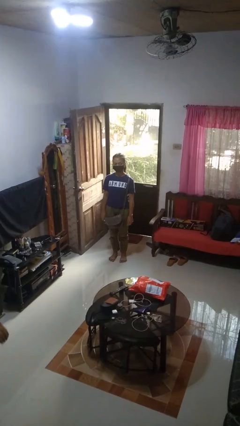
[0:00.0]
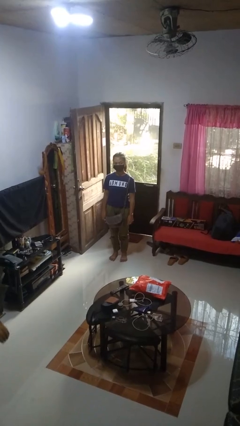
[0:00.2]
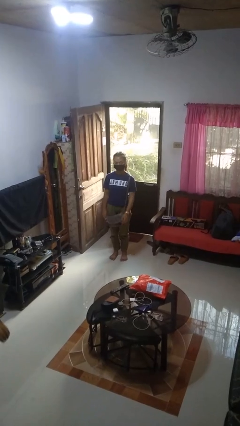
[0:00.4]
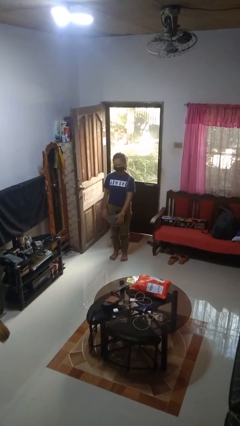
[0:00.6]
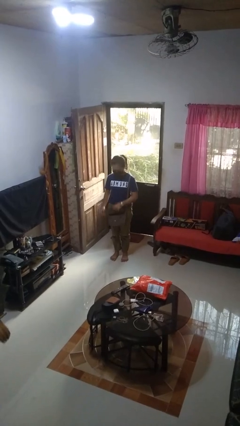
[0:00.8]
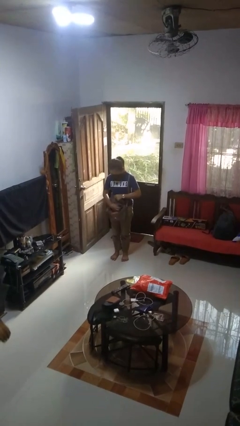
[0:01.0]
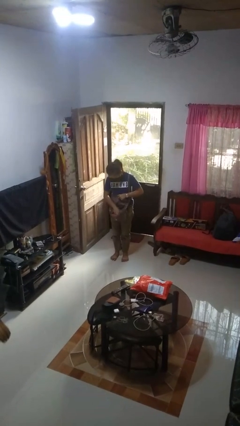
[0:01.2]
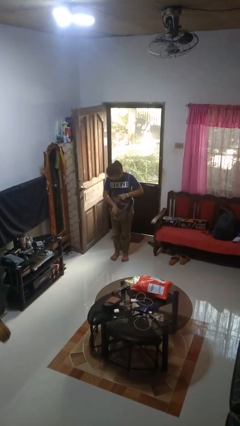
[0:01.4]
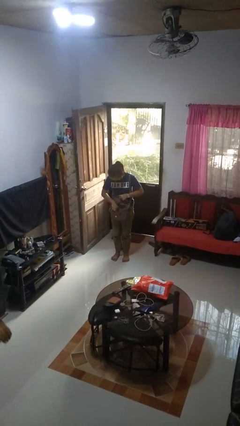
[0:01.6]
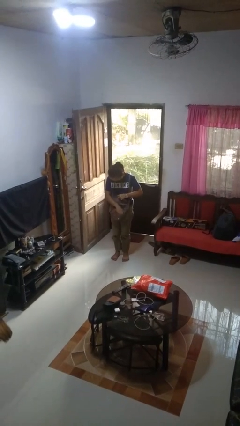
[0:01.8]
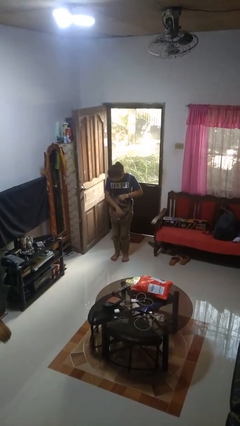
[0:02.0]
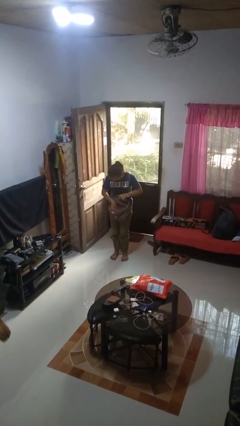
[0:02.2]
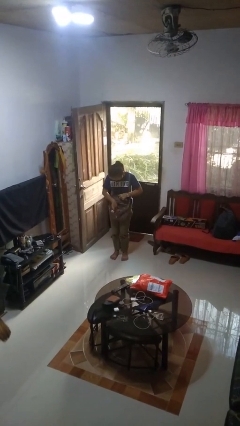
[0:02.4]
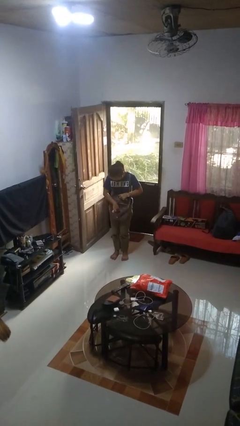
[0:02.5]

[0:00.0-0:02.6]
person searches in purse

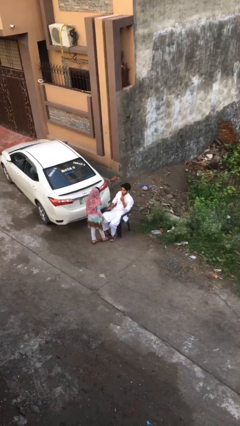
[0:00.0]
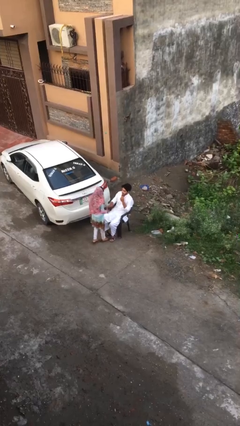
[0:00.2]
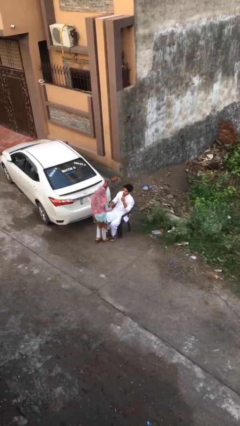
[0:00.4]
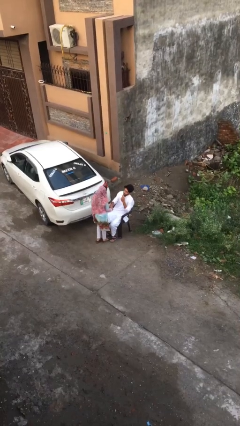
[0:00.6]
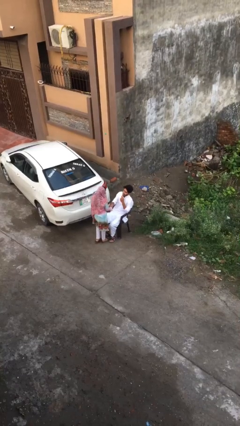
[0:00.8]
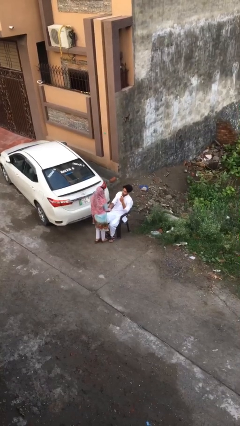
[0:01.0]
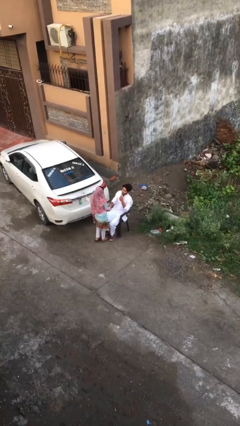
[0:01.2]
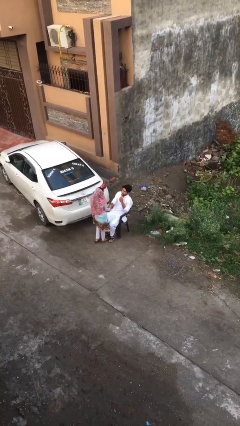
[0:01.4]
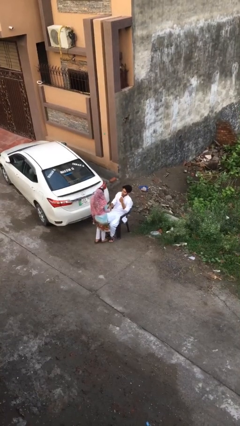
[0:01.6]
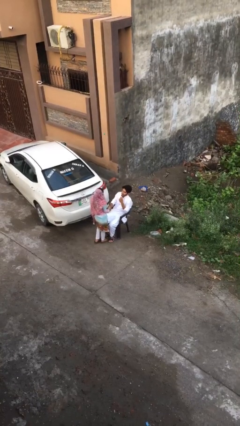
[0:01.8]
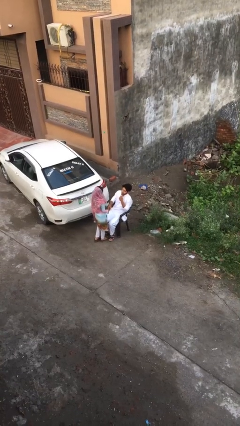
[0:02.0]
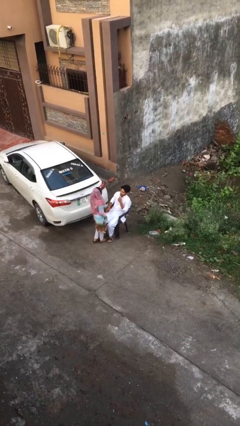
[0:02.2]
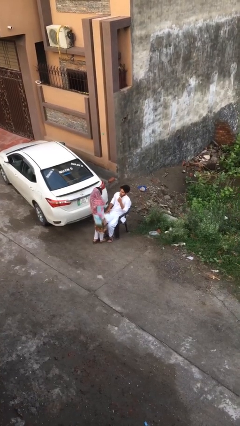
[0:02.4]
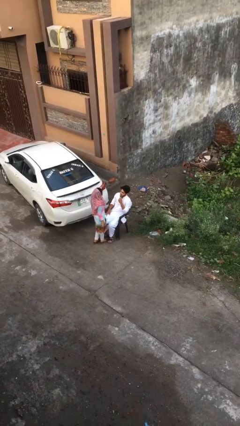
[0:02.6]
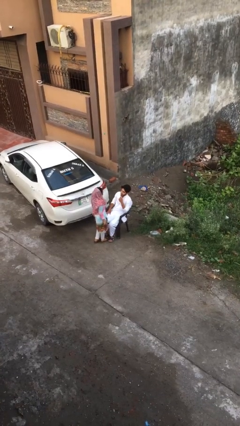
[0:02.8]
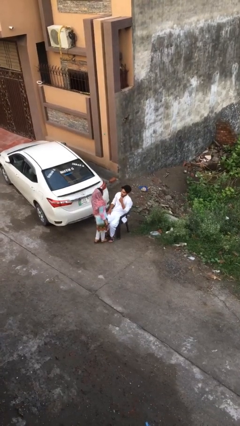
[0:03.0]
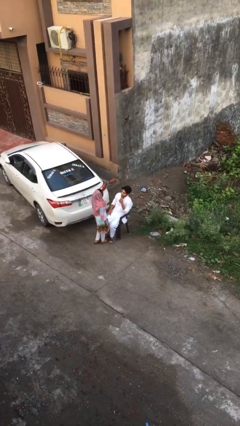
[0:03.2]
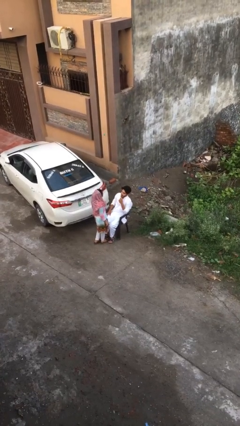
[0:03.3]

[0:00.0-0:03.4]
person shakes hand

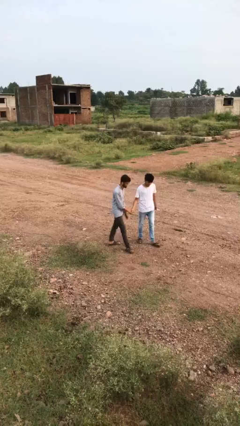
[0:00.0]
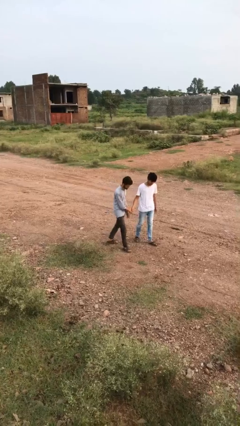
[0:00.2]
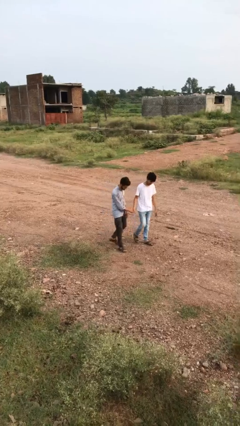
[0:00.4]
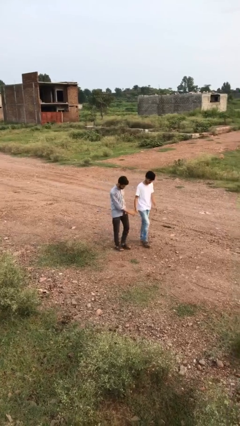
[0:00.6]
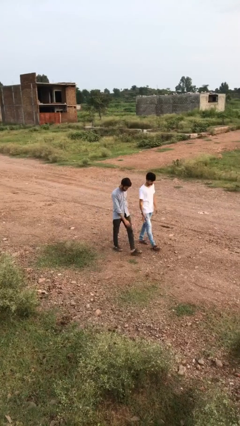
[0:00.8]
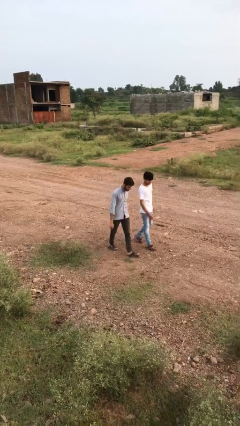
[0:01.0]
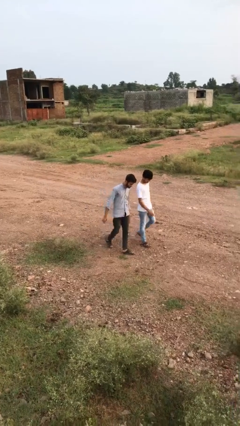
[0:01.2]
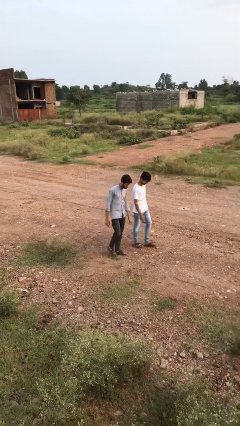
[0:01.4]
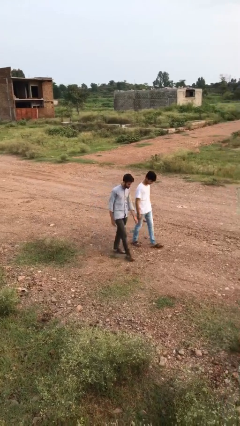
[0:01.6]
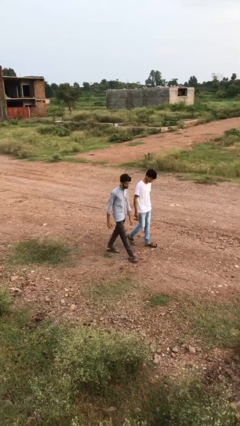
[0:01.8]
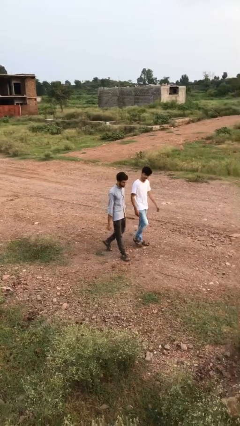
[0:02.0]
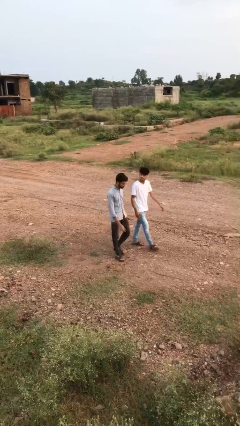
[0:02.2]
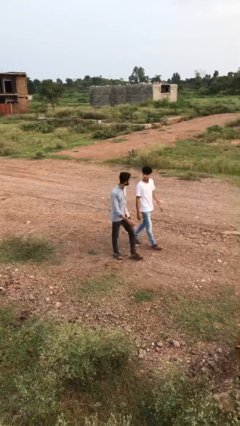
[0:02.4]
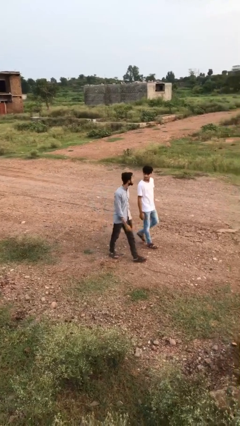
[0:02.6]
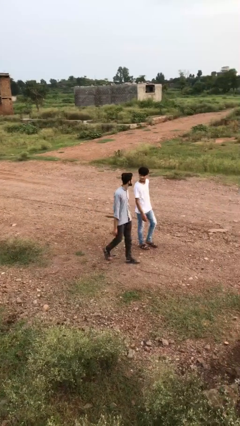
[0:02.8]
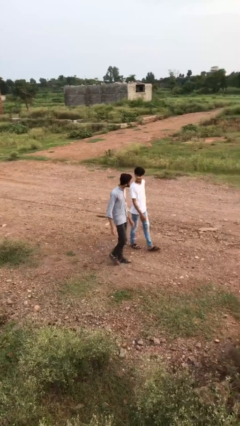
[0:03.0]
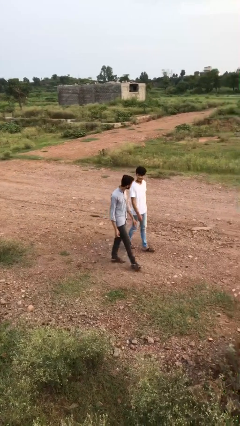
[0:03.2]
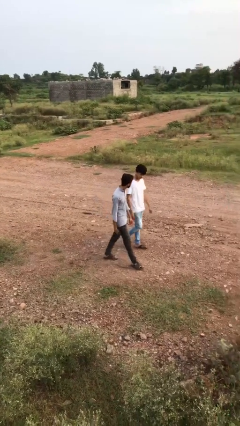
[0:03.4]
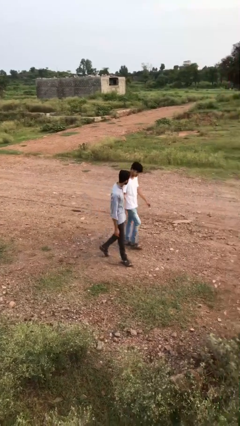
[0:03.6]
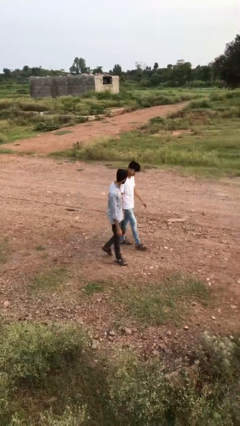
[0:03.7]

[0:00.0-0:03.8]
person talks to person

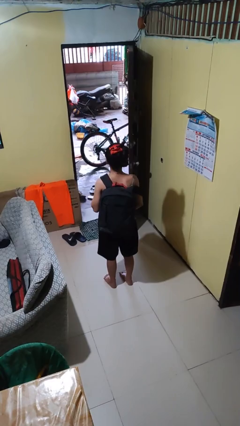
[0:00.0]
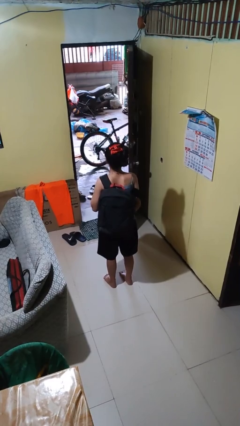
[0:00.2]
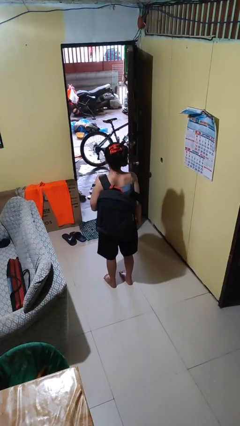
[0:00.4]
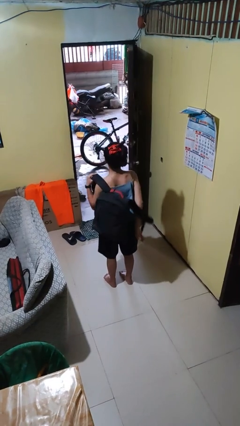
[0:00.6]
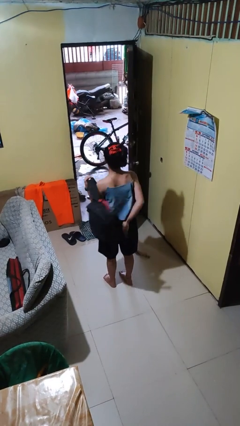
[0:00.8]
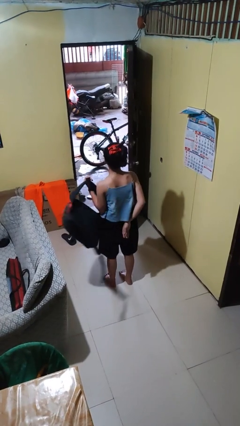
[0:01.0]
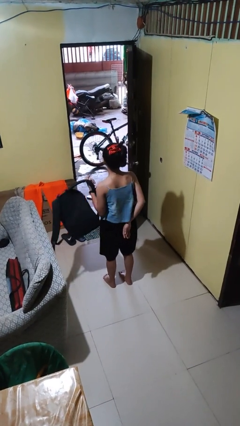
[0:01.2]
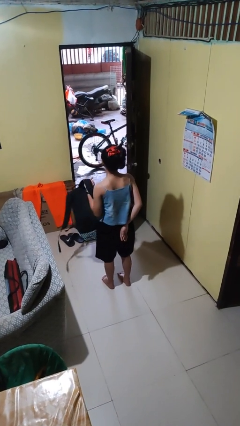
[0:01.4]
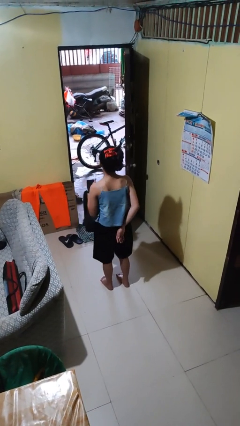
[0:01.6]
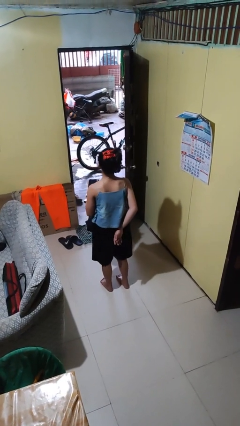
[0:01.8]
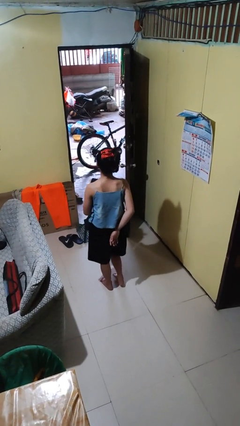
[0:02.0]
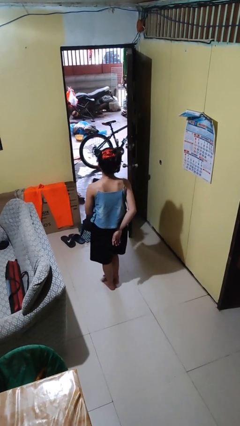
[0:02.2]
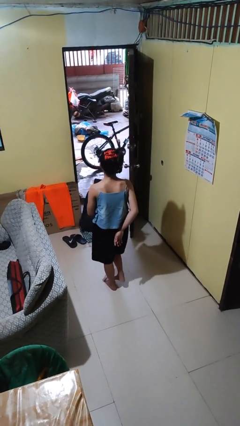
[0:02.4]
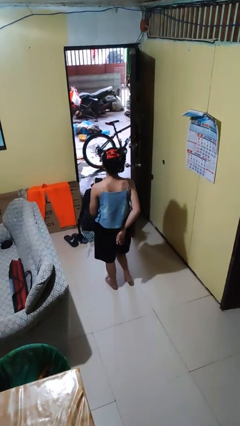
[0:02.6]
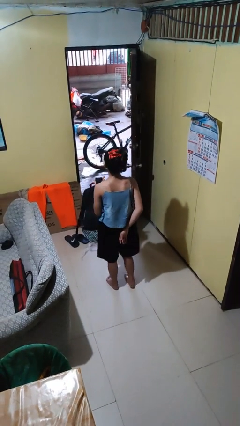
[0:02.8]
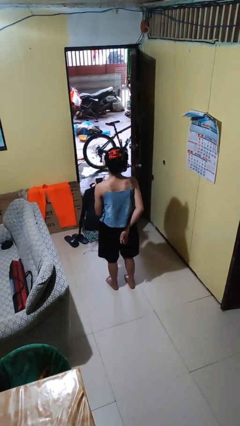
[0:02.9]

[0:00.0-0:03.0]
person takes off backpack

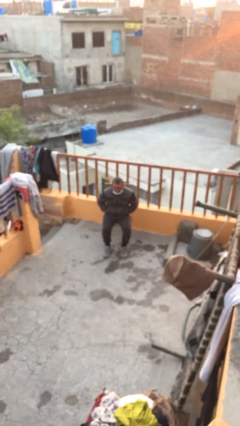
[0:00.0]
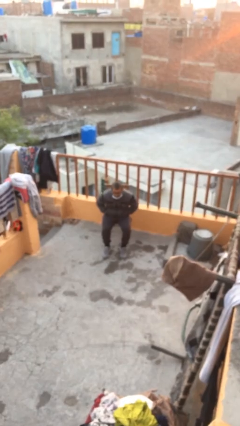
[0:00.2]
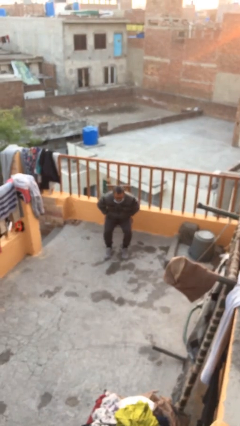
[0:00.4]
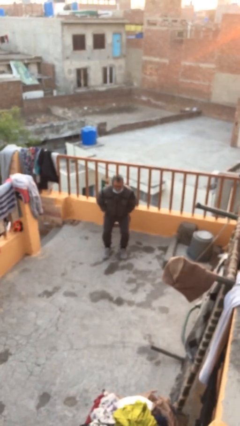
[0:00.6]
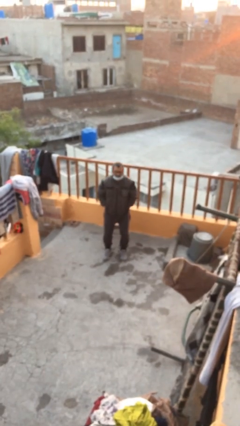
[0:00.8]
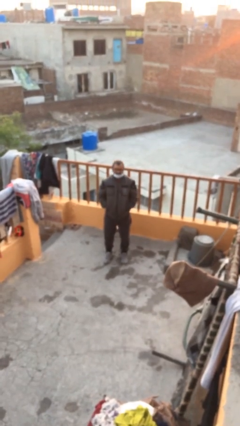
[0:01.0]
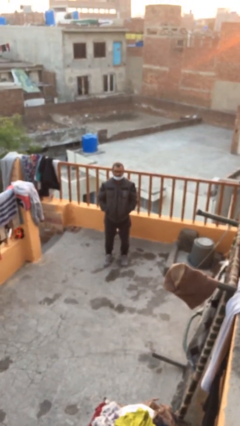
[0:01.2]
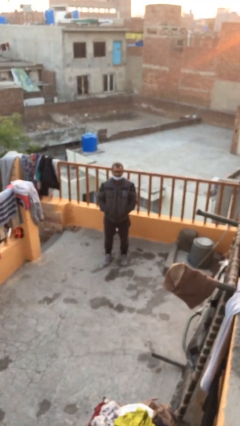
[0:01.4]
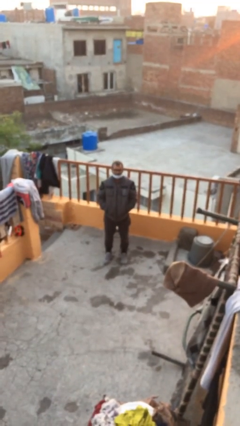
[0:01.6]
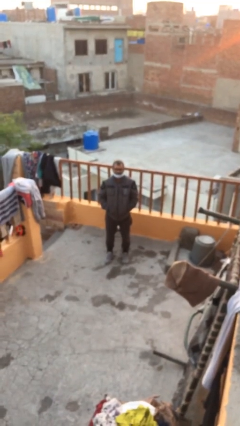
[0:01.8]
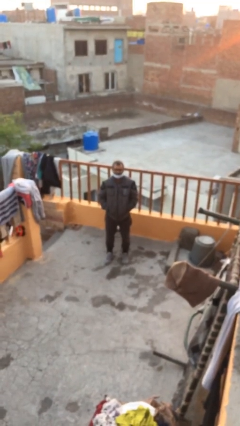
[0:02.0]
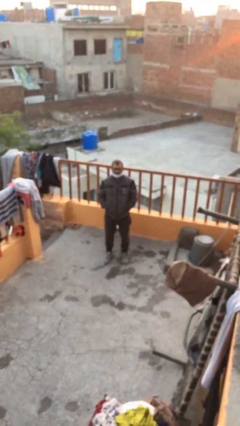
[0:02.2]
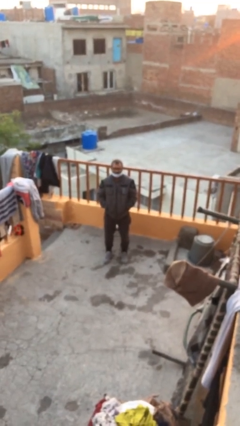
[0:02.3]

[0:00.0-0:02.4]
person stands up

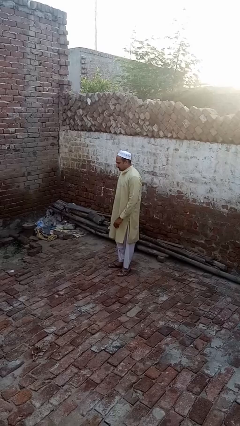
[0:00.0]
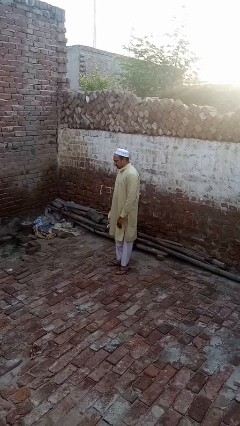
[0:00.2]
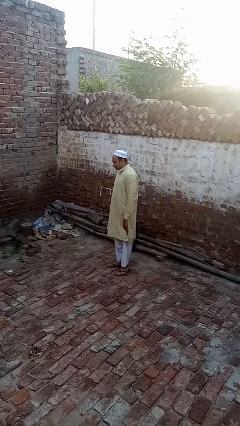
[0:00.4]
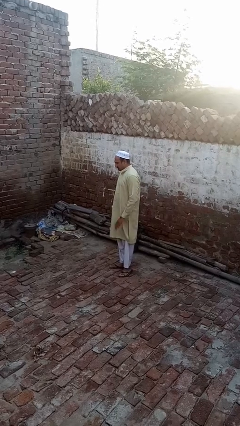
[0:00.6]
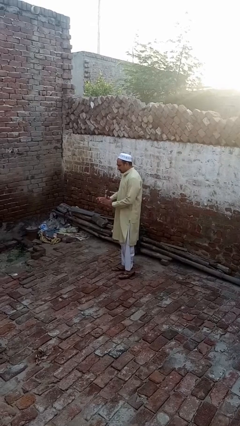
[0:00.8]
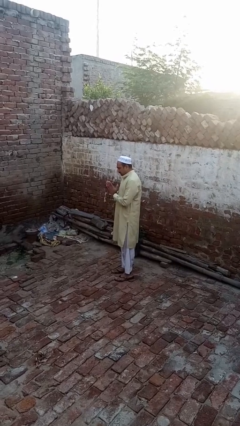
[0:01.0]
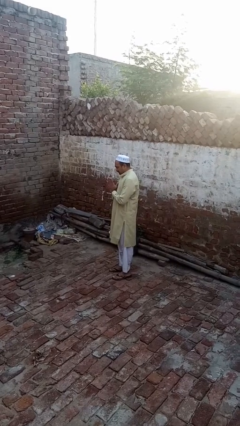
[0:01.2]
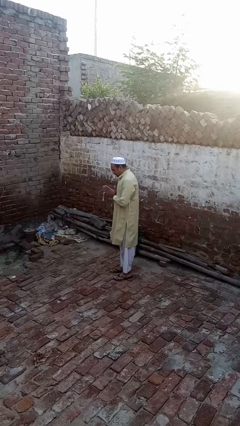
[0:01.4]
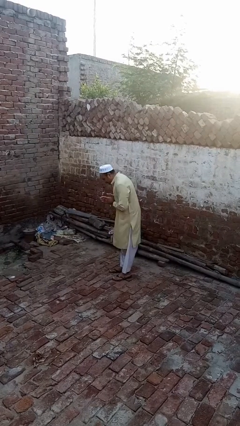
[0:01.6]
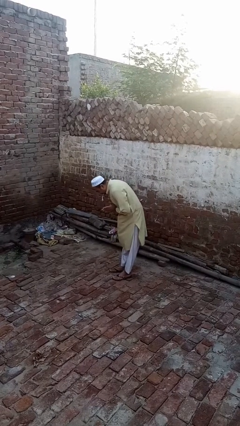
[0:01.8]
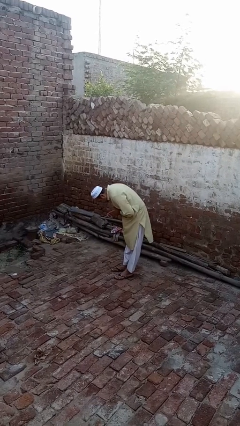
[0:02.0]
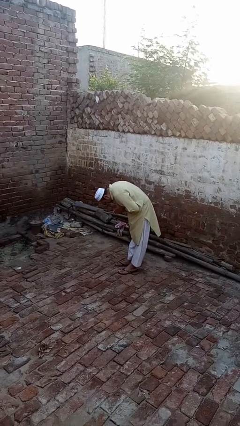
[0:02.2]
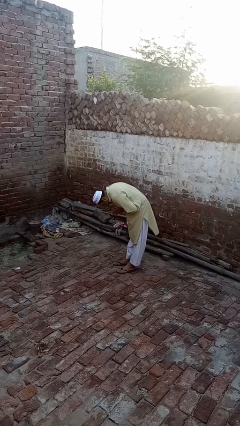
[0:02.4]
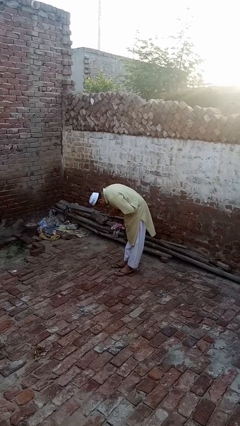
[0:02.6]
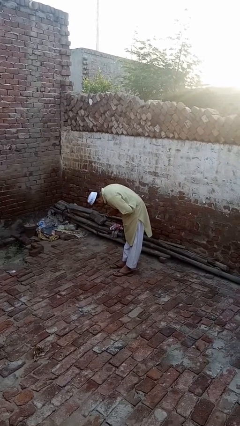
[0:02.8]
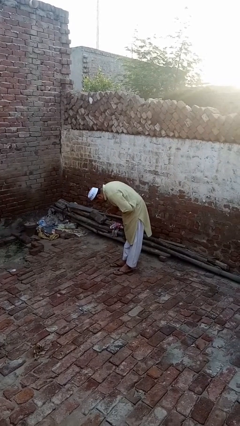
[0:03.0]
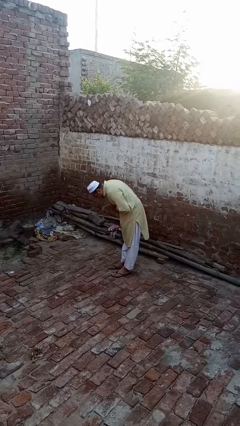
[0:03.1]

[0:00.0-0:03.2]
person bows
